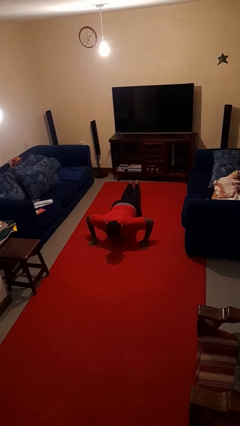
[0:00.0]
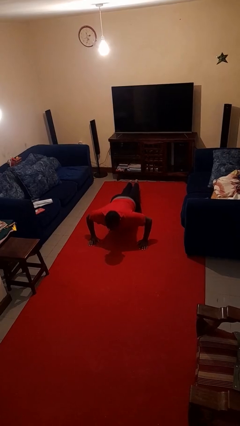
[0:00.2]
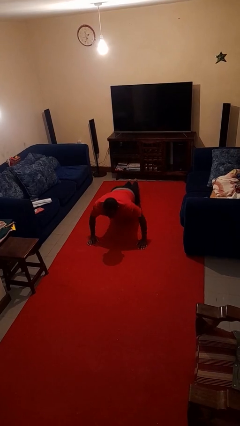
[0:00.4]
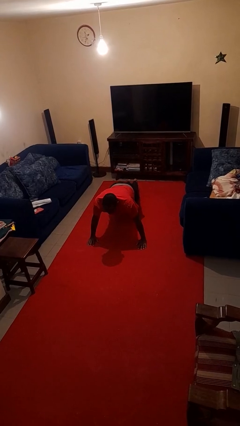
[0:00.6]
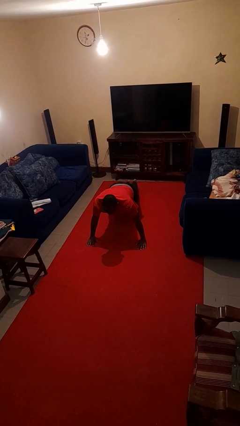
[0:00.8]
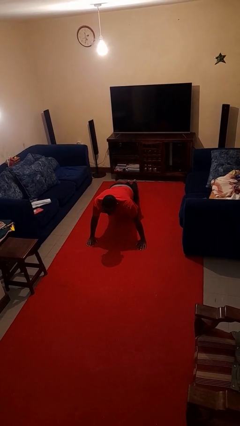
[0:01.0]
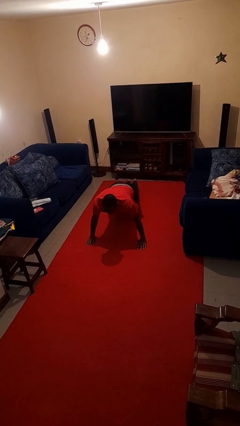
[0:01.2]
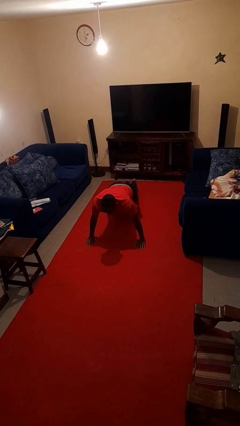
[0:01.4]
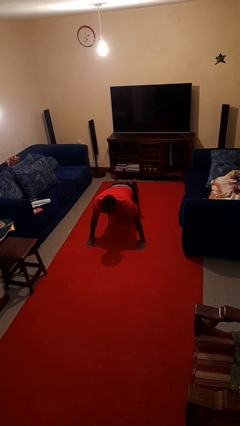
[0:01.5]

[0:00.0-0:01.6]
person exercises with pushup

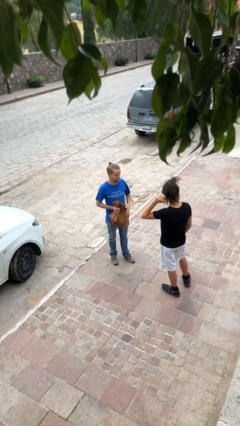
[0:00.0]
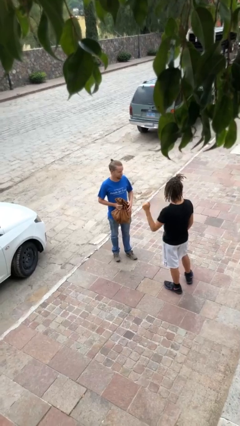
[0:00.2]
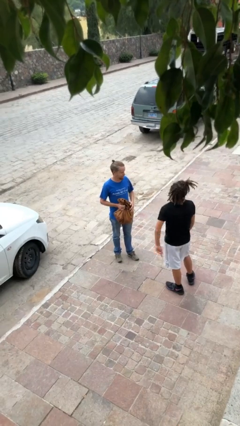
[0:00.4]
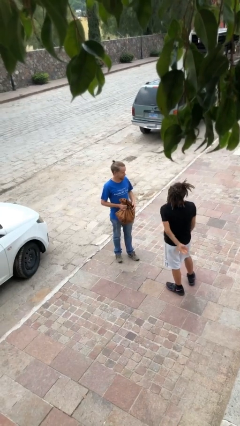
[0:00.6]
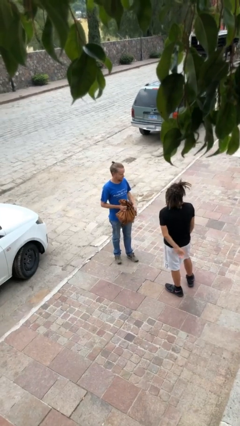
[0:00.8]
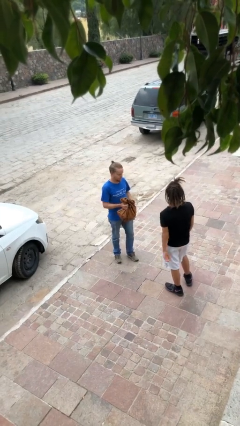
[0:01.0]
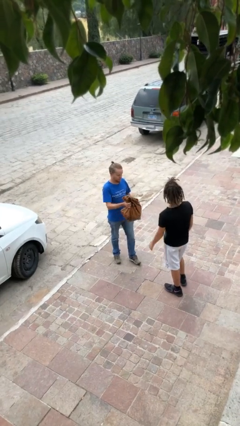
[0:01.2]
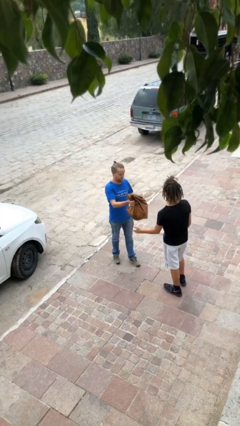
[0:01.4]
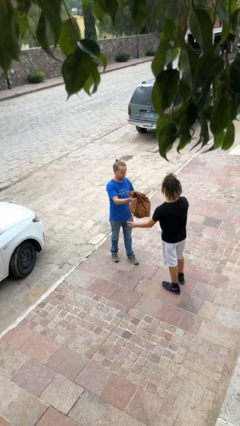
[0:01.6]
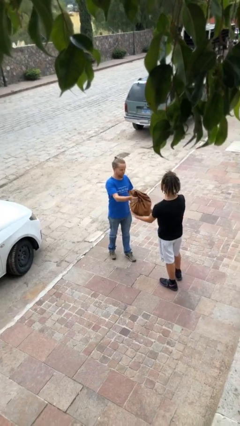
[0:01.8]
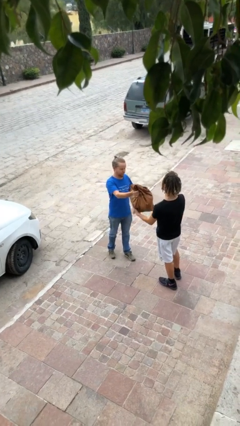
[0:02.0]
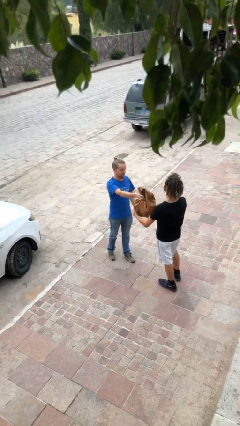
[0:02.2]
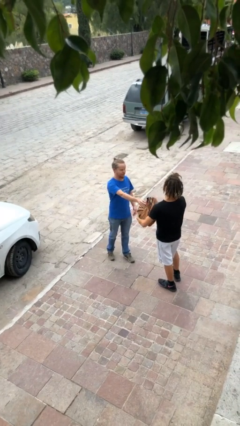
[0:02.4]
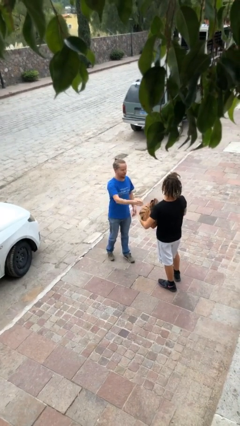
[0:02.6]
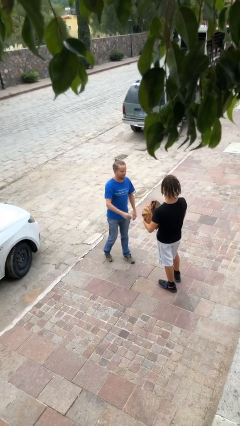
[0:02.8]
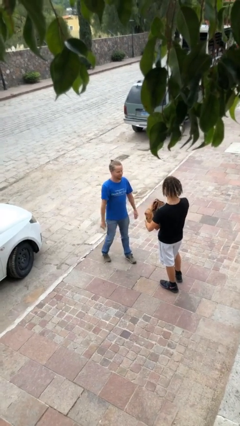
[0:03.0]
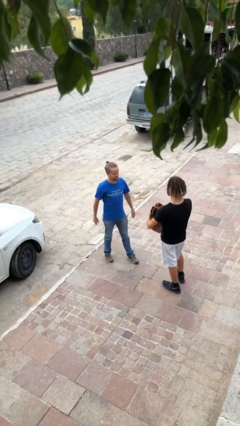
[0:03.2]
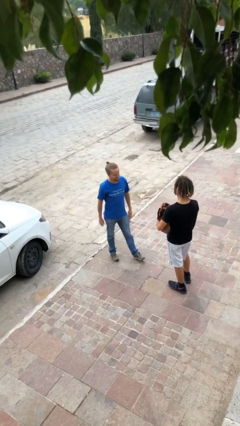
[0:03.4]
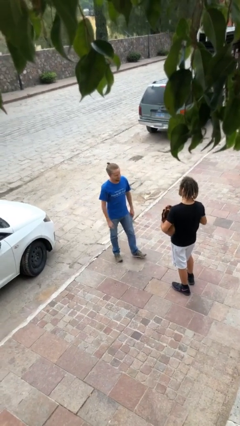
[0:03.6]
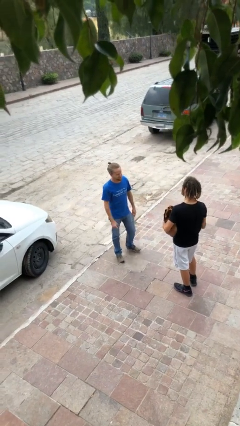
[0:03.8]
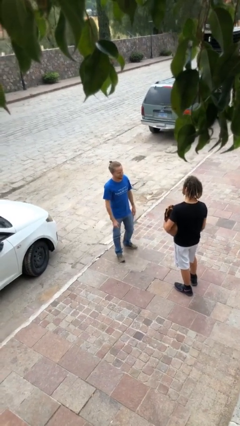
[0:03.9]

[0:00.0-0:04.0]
person transfers object to person

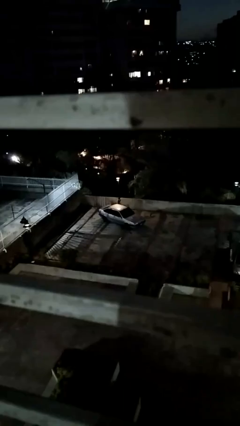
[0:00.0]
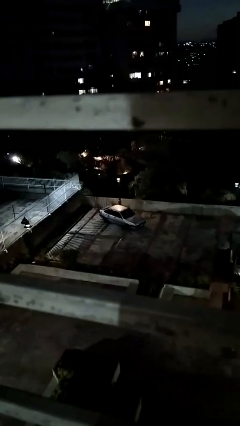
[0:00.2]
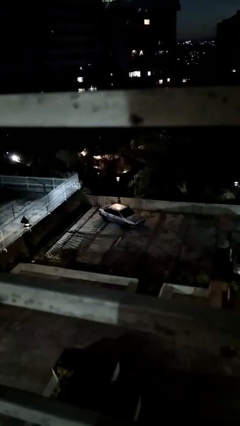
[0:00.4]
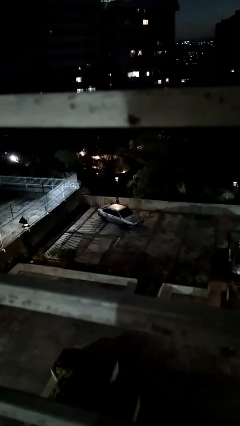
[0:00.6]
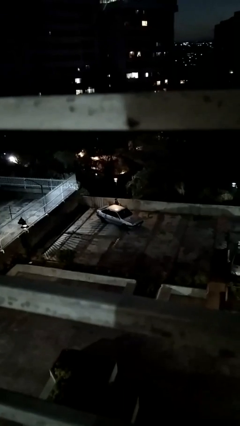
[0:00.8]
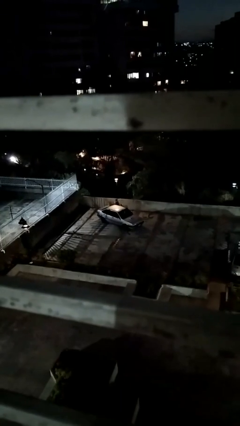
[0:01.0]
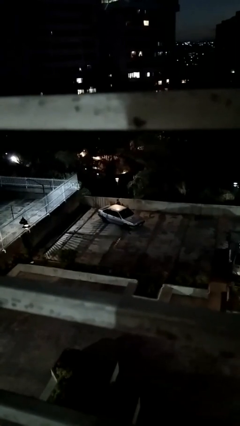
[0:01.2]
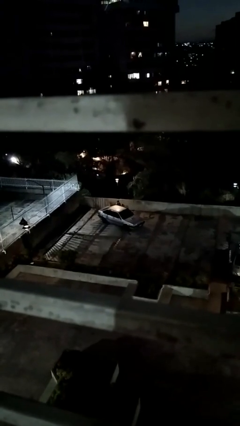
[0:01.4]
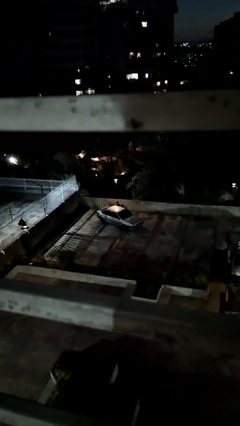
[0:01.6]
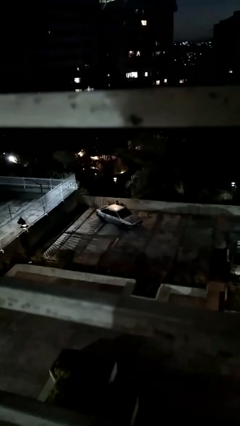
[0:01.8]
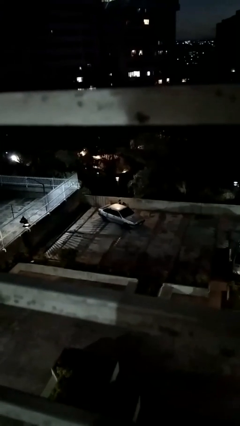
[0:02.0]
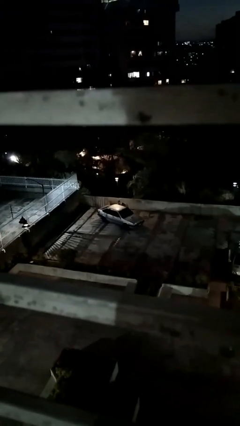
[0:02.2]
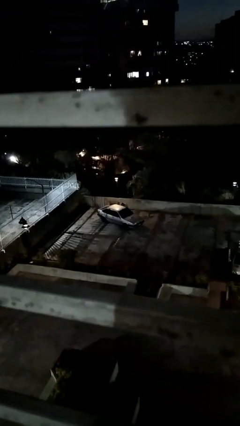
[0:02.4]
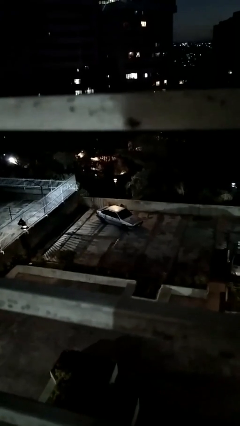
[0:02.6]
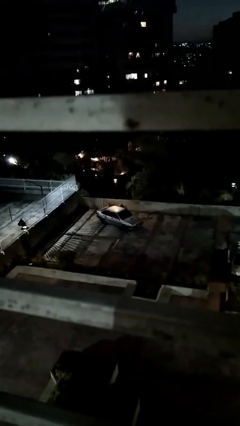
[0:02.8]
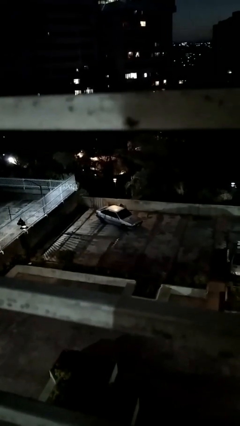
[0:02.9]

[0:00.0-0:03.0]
car picks up person

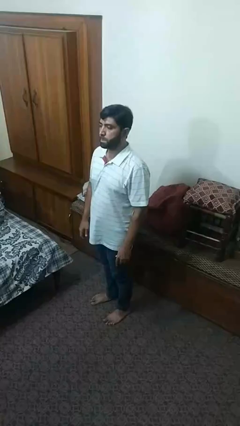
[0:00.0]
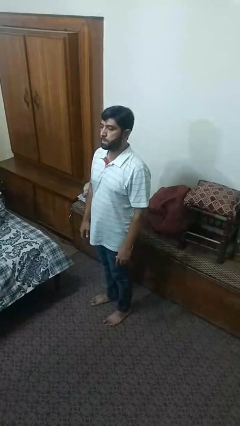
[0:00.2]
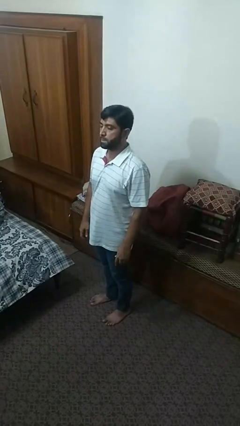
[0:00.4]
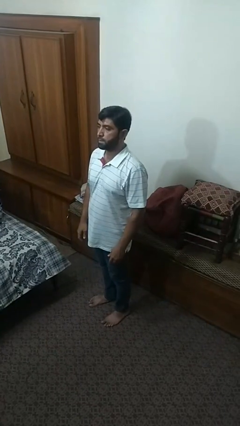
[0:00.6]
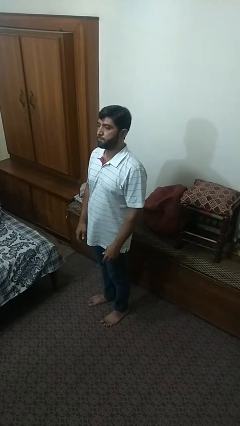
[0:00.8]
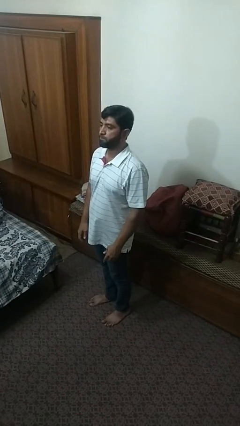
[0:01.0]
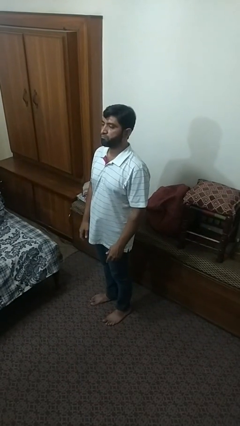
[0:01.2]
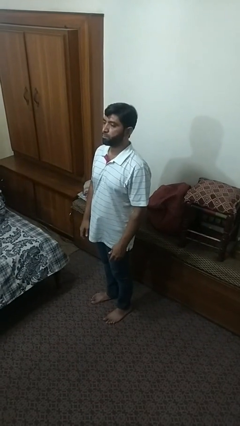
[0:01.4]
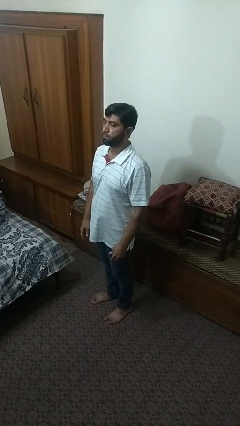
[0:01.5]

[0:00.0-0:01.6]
person squats

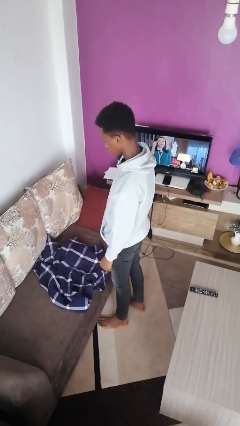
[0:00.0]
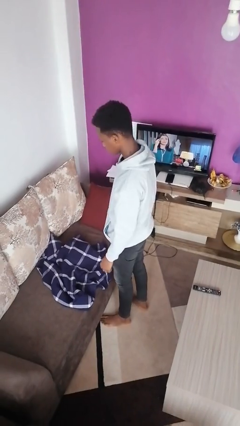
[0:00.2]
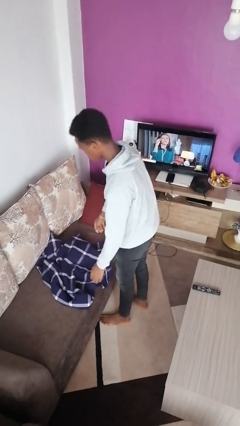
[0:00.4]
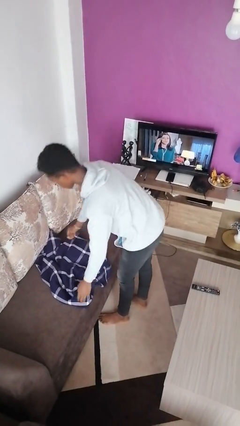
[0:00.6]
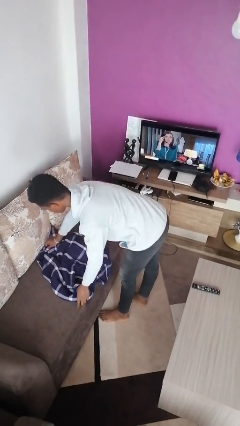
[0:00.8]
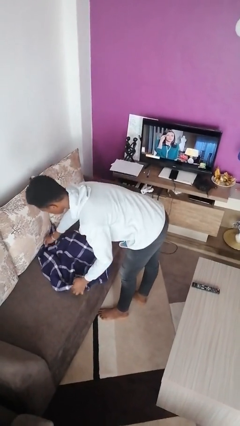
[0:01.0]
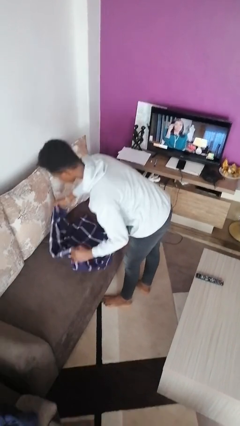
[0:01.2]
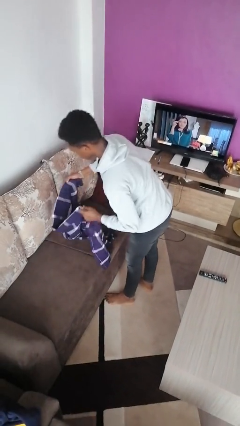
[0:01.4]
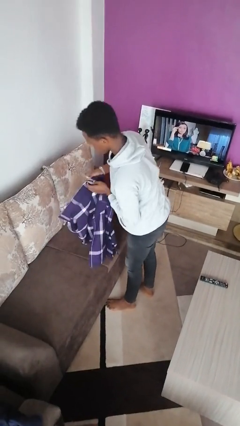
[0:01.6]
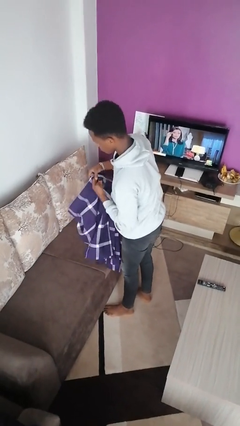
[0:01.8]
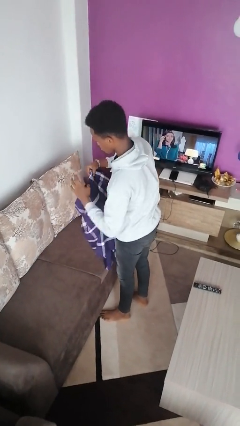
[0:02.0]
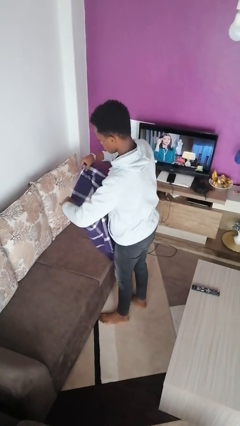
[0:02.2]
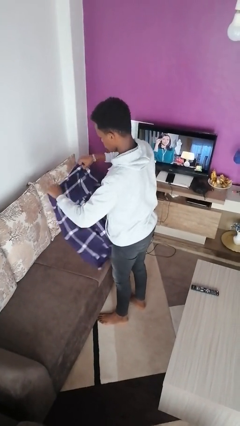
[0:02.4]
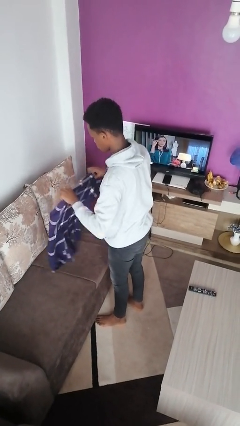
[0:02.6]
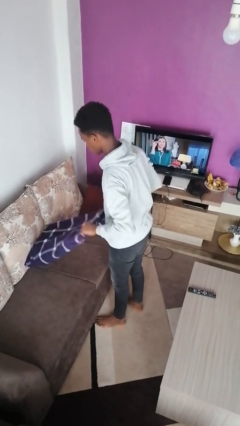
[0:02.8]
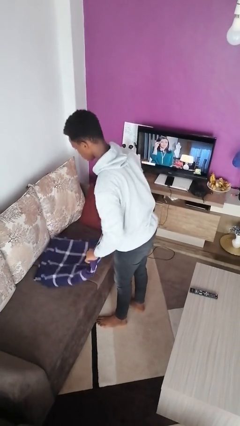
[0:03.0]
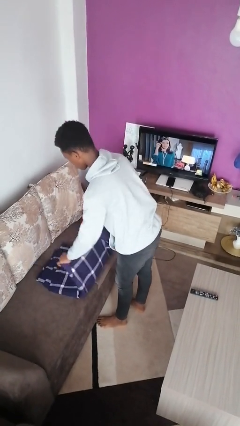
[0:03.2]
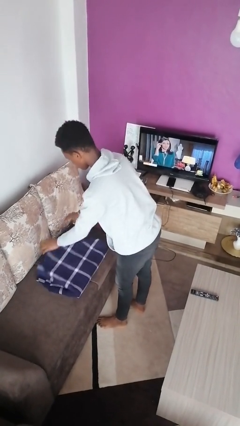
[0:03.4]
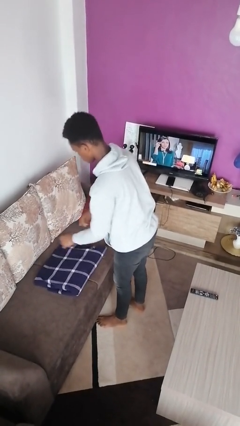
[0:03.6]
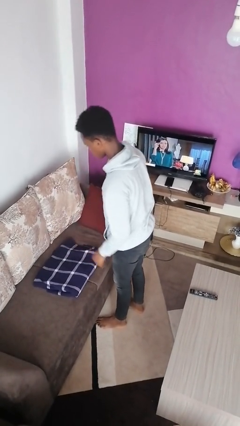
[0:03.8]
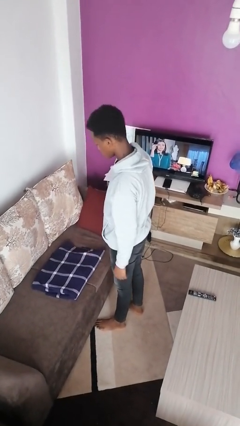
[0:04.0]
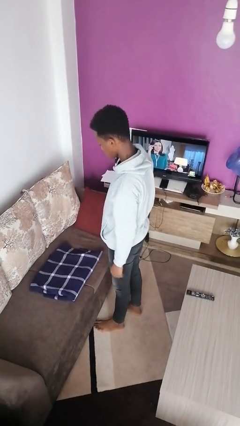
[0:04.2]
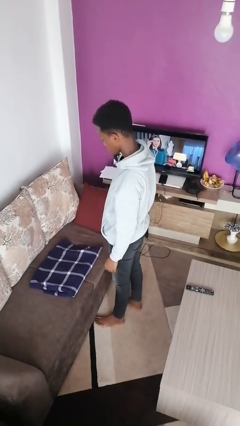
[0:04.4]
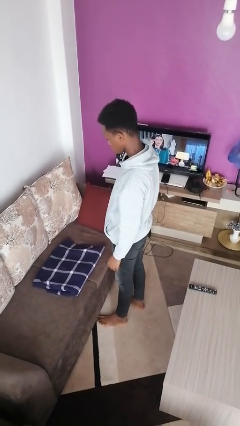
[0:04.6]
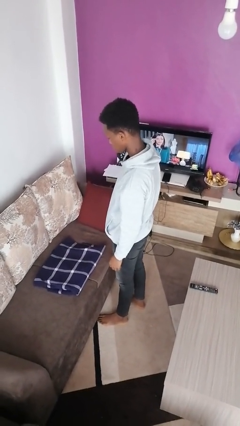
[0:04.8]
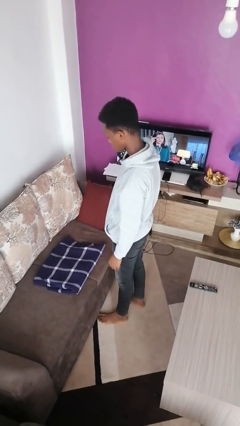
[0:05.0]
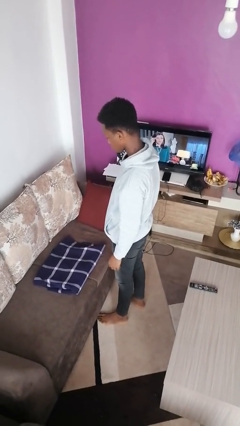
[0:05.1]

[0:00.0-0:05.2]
person folds blanket

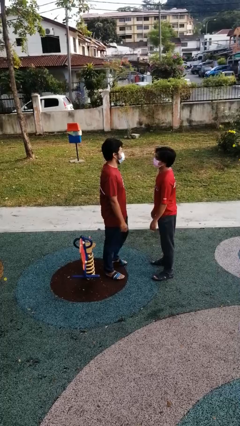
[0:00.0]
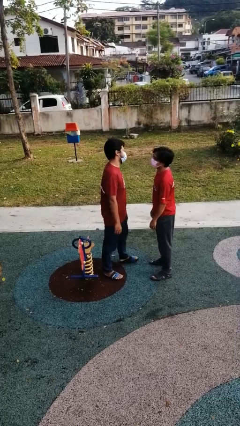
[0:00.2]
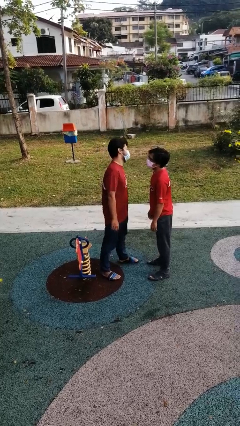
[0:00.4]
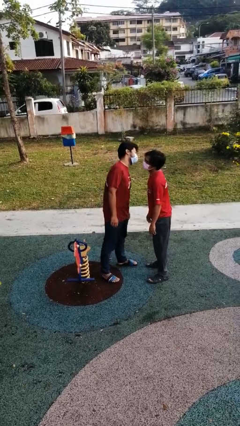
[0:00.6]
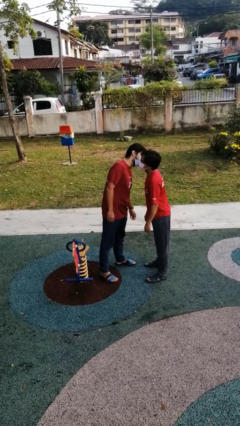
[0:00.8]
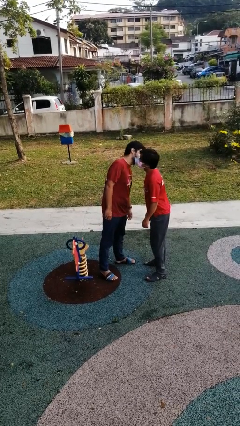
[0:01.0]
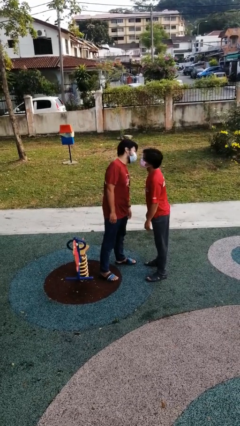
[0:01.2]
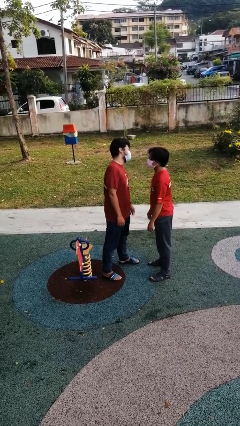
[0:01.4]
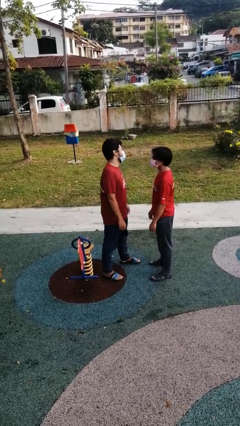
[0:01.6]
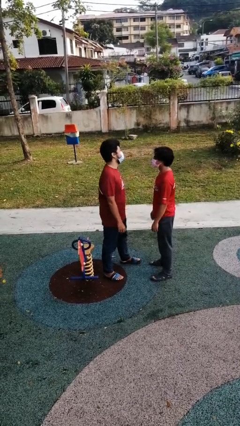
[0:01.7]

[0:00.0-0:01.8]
person kisses cheek of person

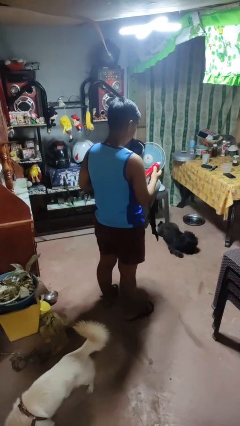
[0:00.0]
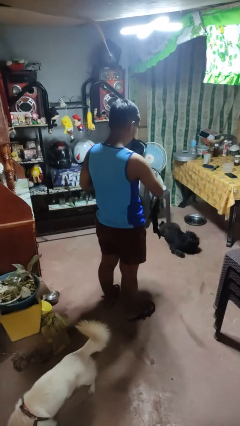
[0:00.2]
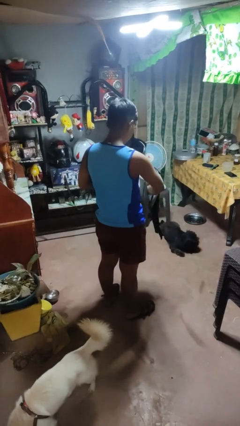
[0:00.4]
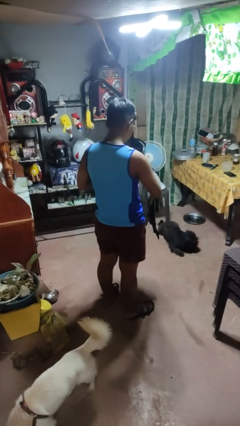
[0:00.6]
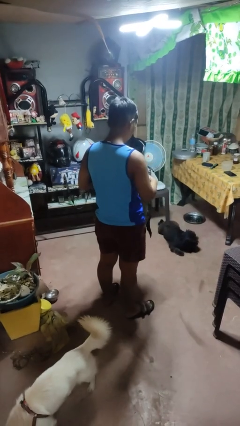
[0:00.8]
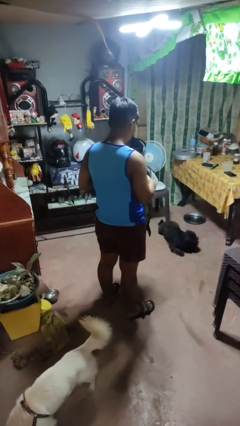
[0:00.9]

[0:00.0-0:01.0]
person puts object into bag
